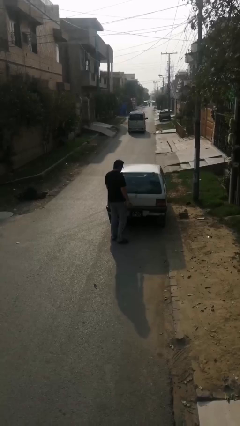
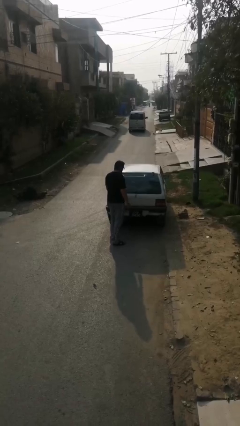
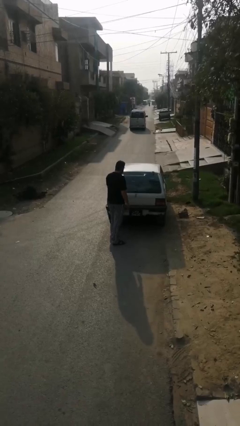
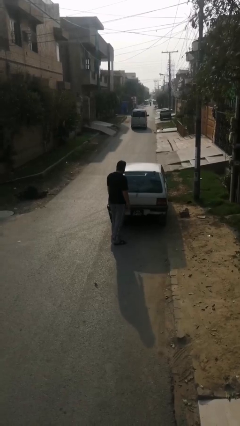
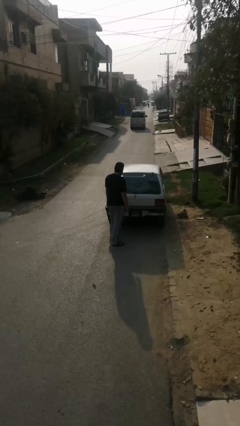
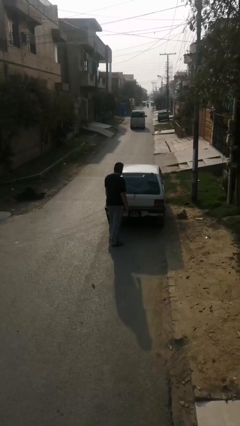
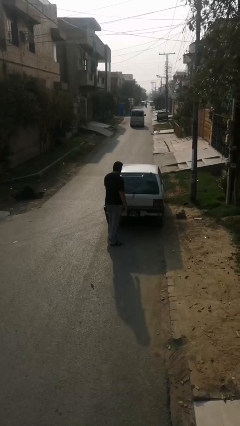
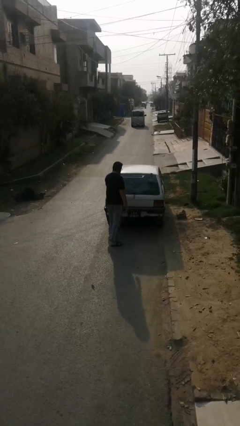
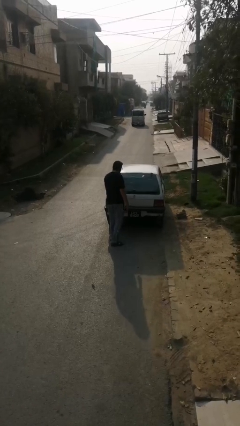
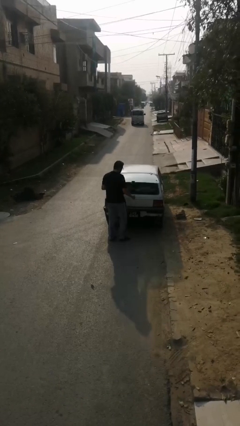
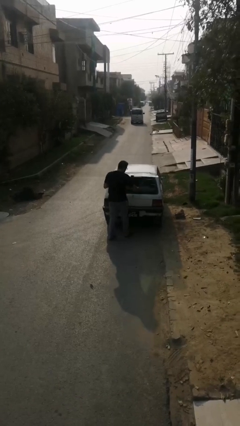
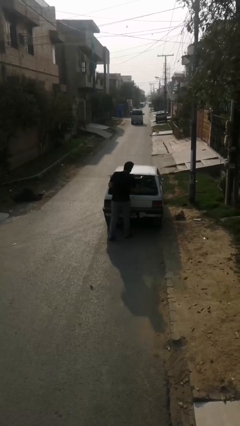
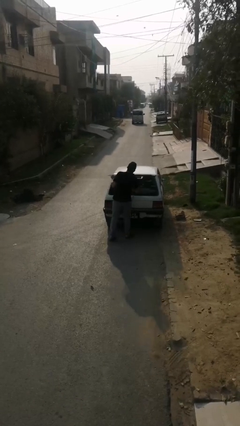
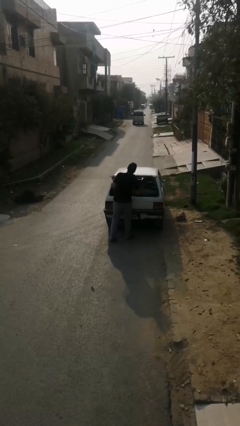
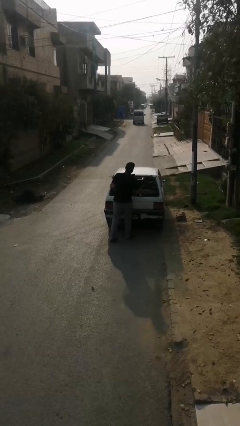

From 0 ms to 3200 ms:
person loads car

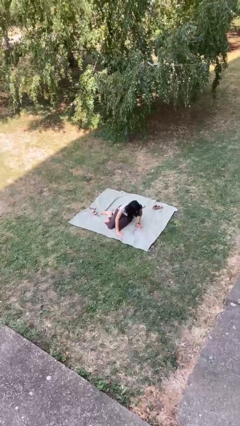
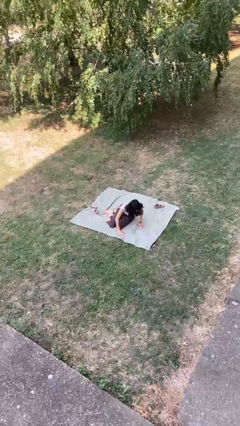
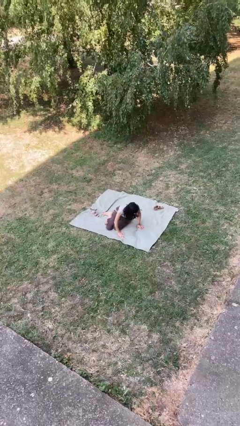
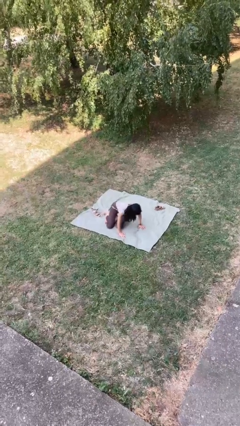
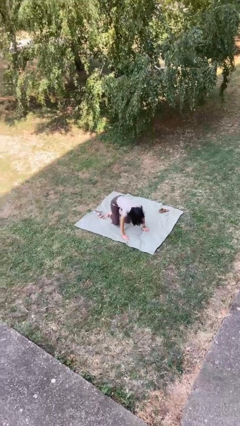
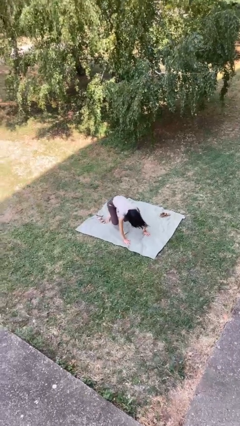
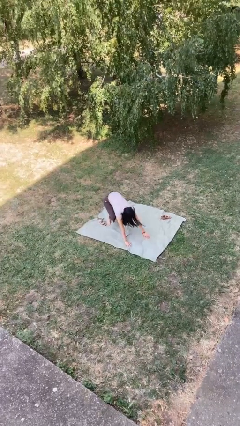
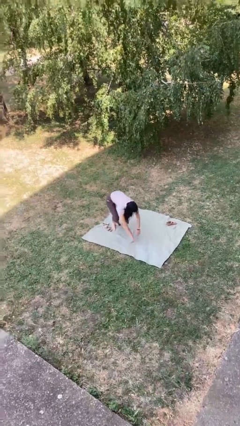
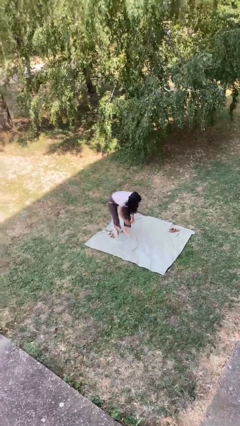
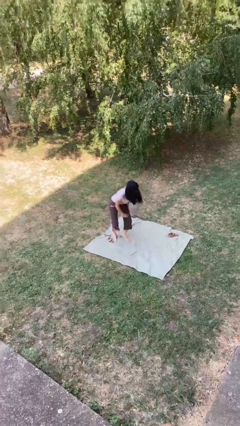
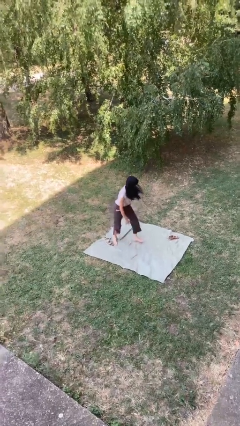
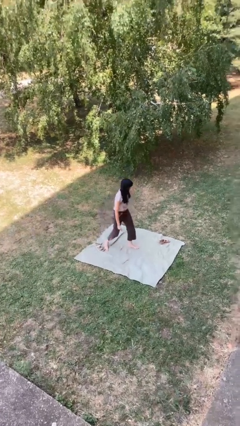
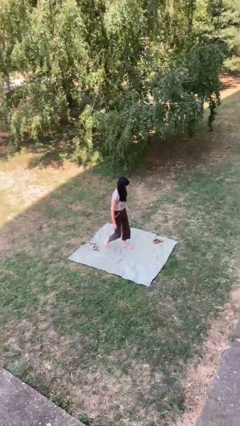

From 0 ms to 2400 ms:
person stands up from floor

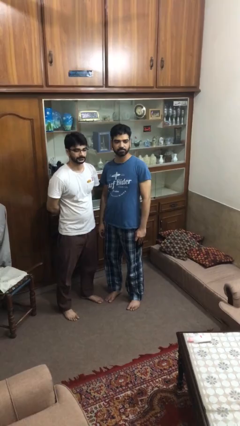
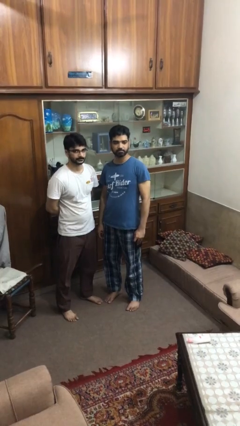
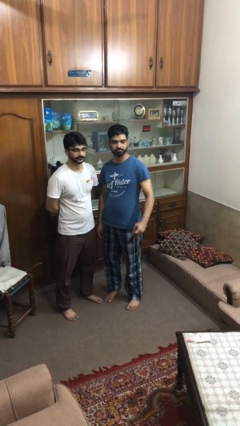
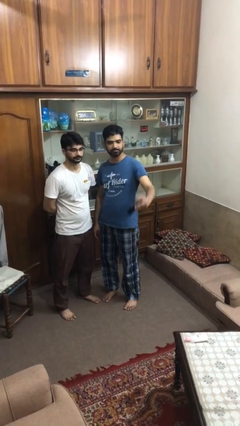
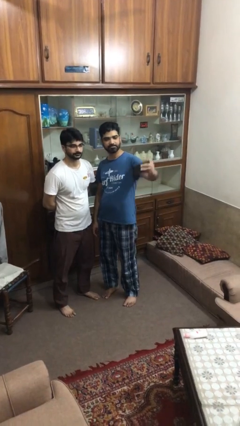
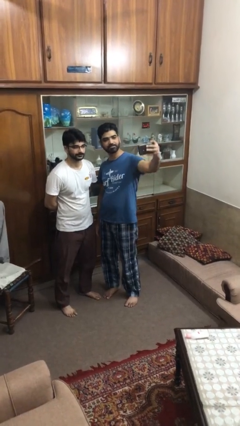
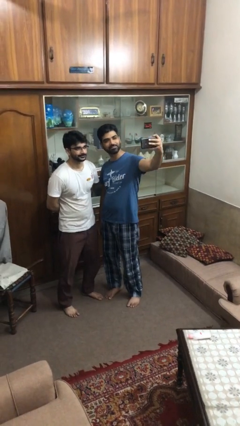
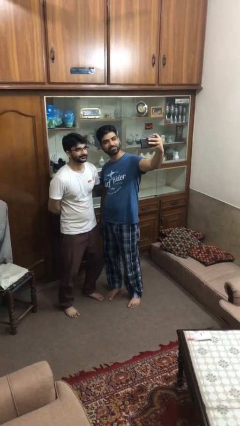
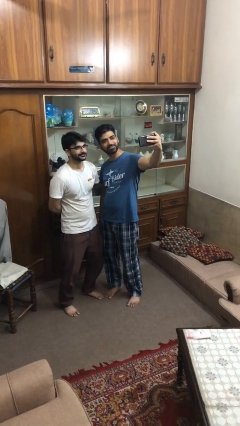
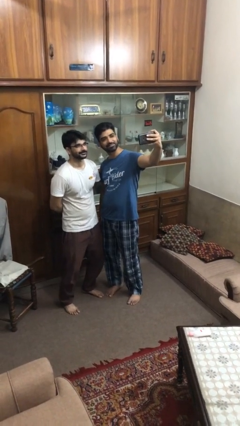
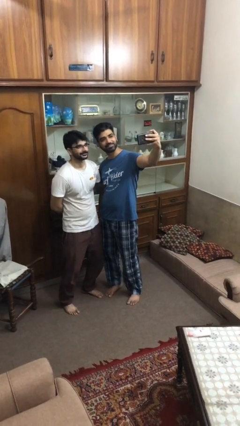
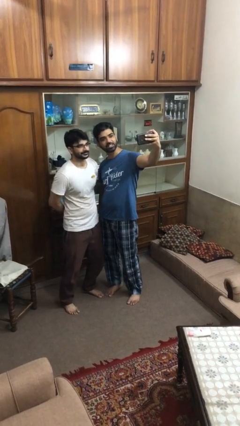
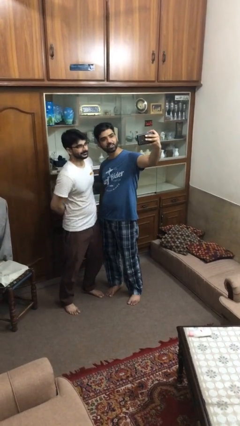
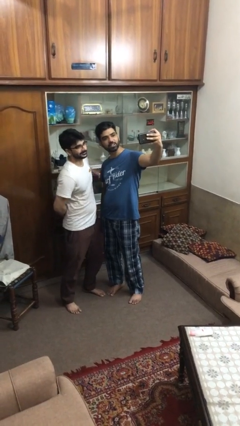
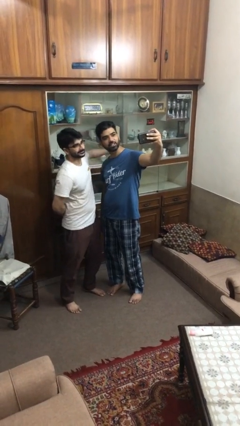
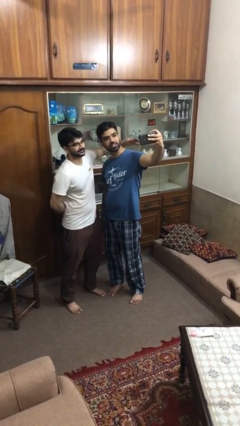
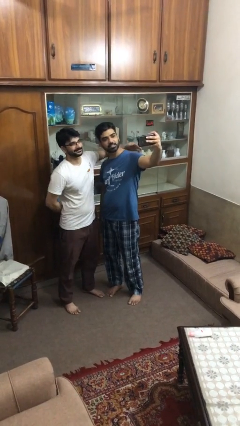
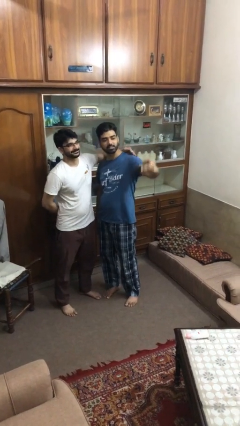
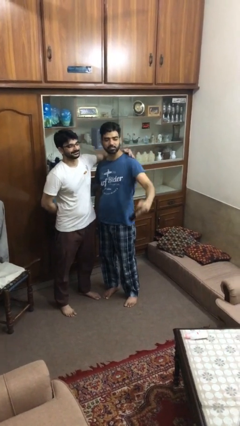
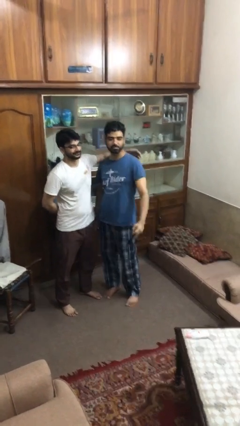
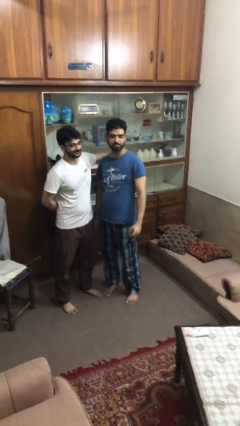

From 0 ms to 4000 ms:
person takes selfie with person

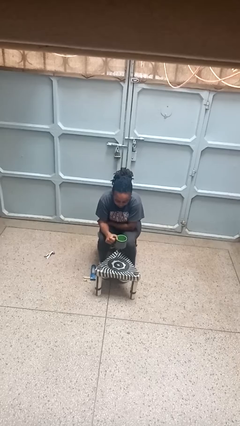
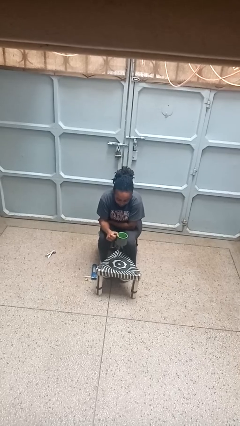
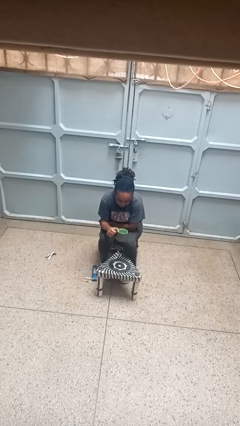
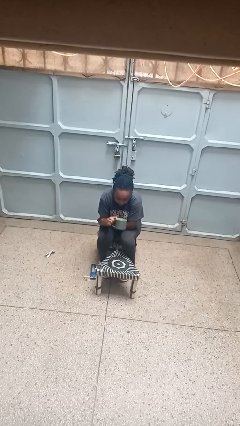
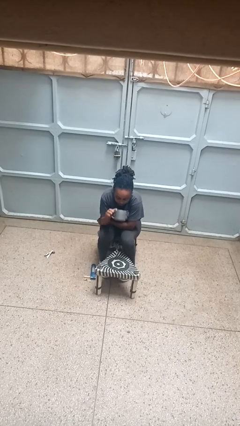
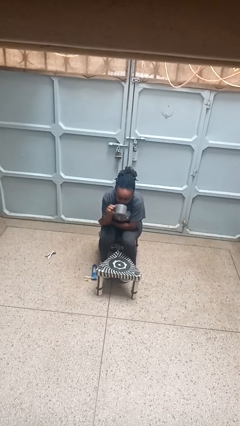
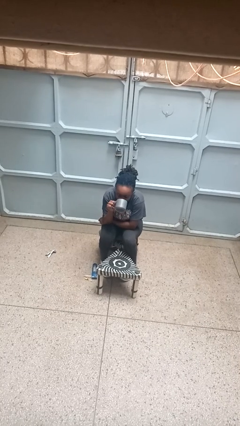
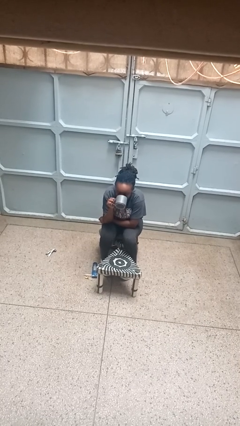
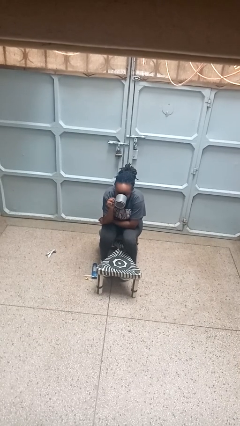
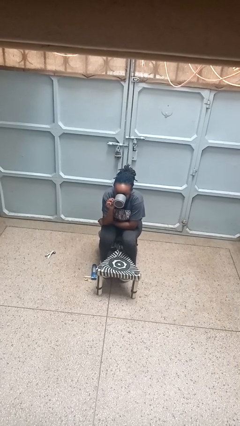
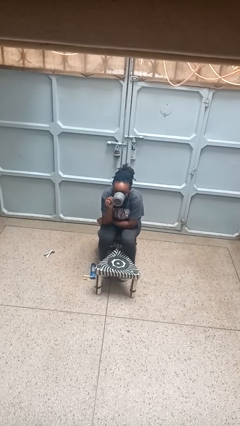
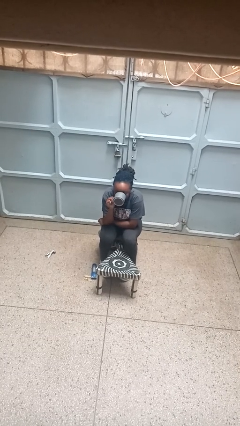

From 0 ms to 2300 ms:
person drinks from mug

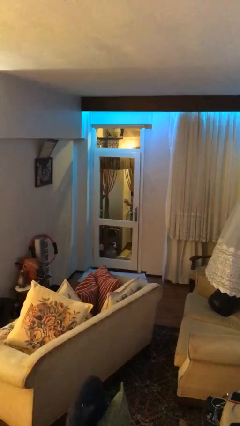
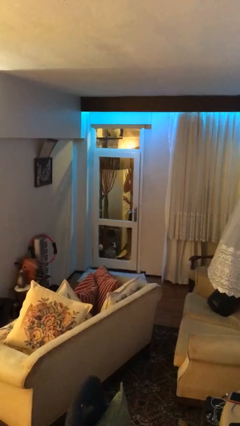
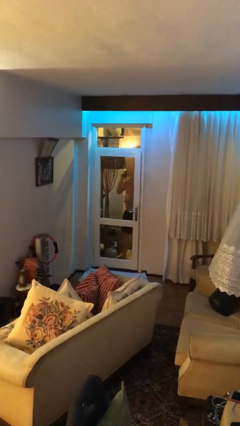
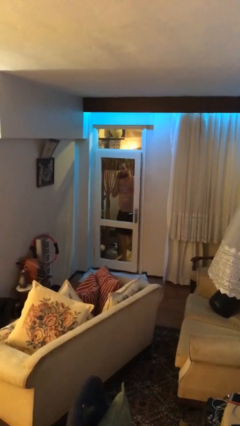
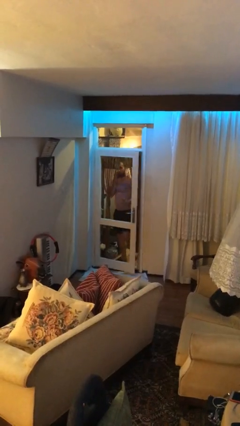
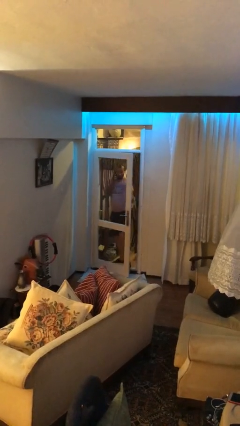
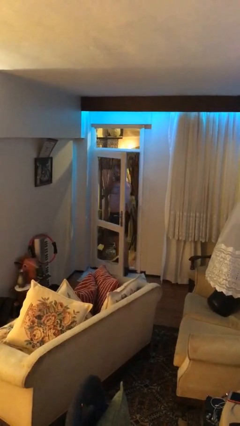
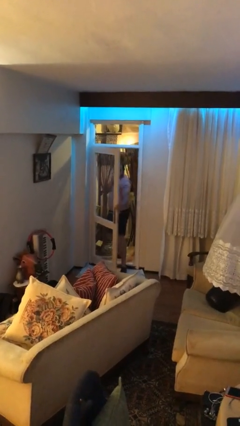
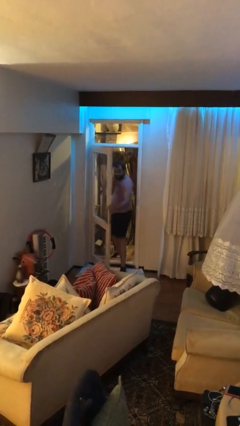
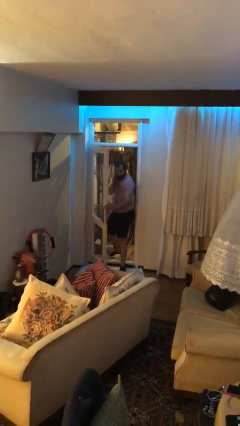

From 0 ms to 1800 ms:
person opens facility door

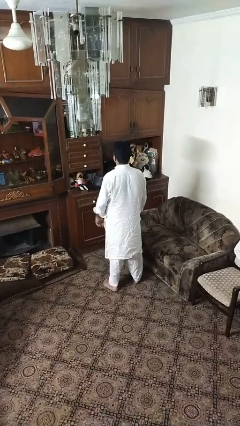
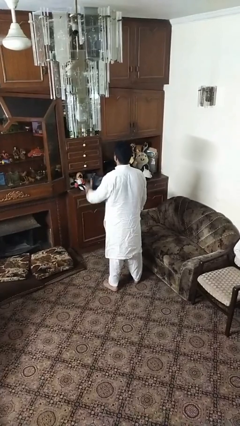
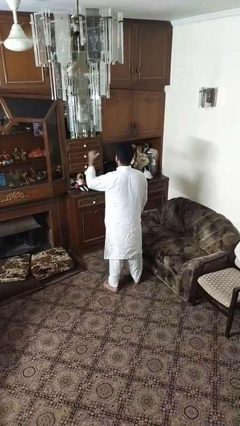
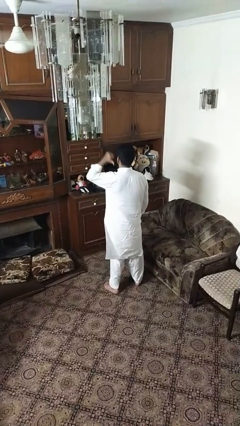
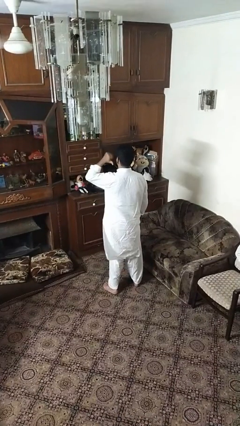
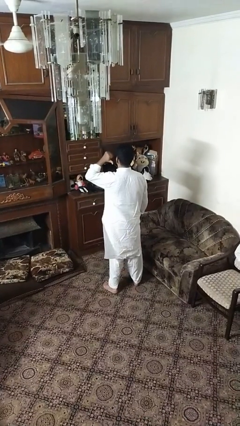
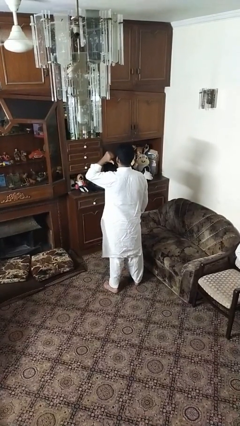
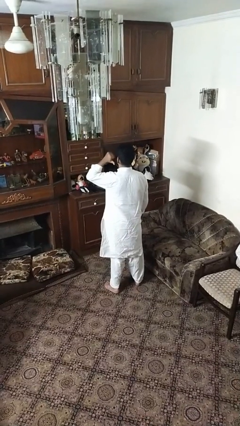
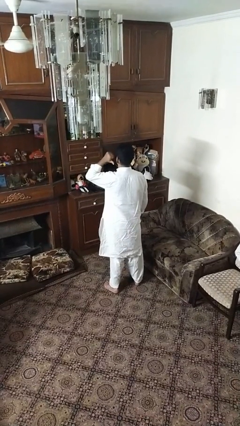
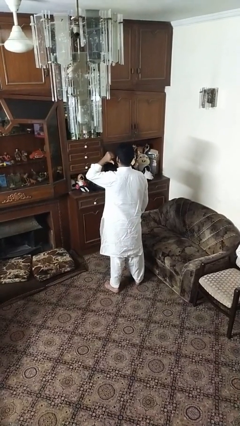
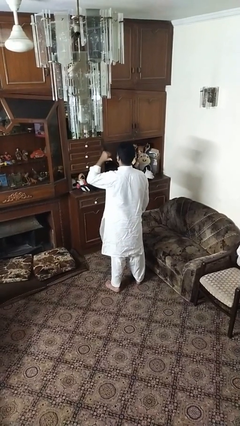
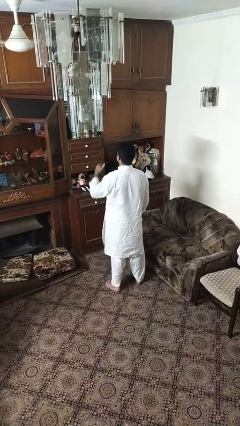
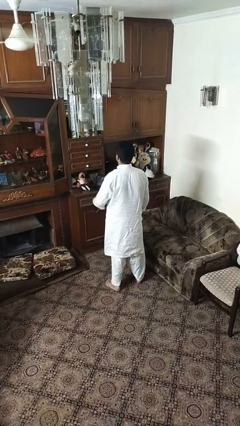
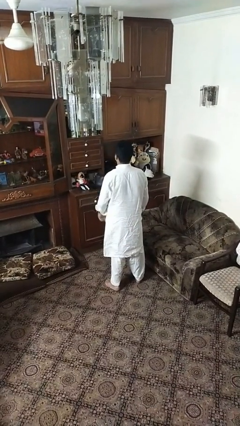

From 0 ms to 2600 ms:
person gestures behind me

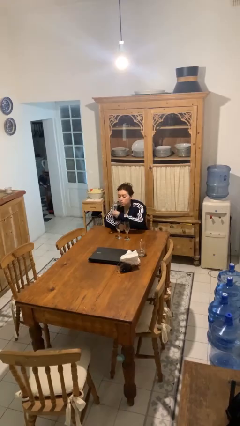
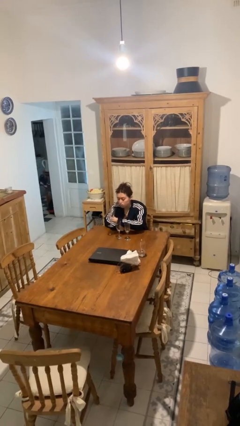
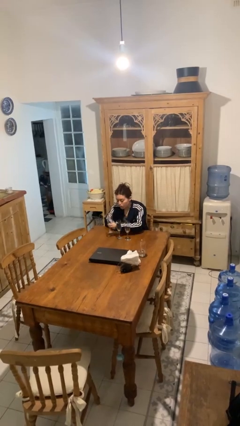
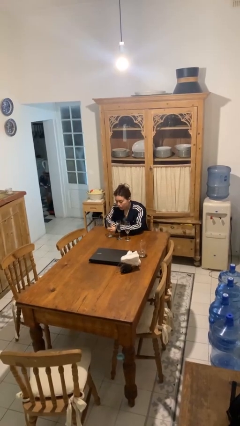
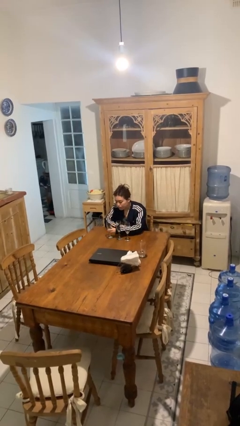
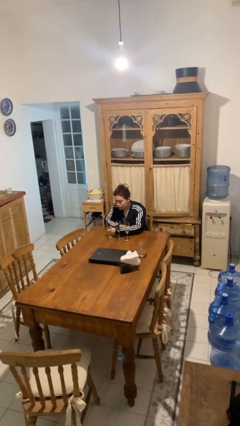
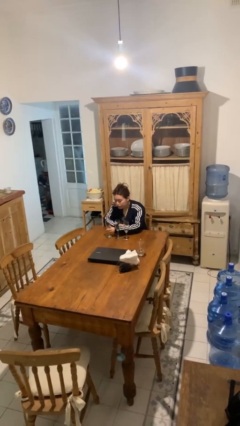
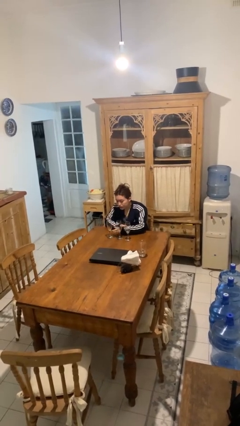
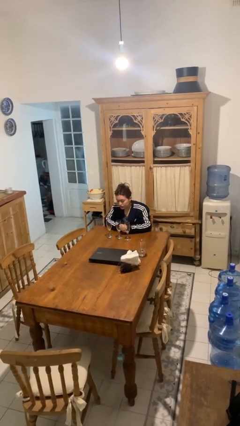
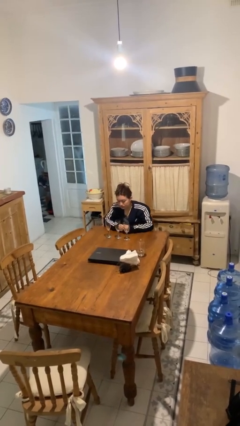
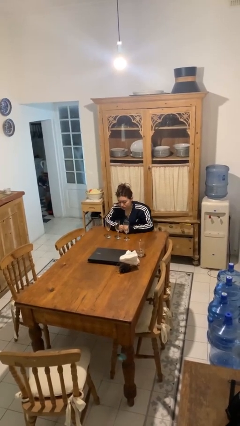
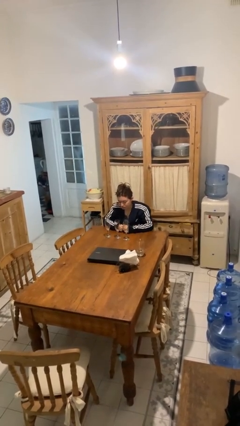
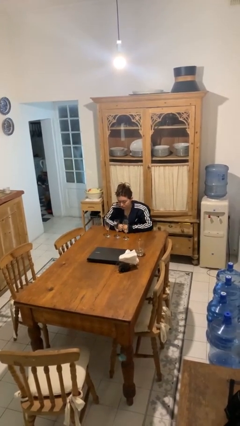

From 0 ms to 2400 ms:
person puts down object on table
